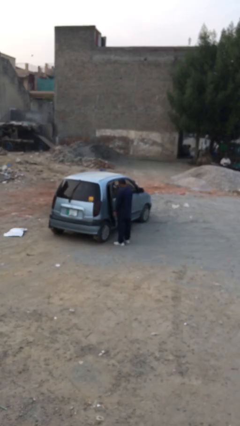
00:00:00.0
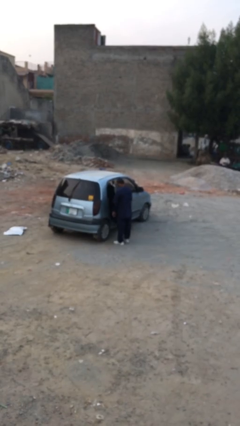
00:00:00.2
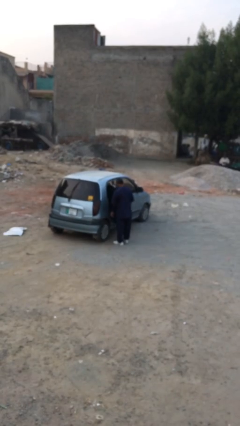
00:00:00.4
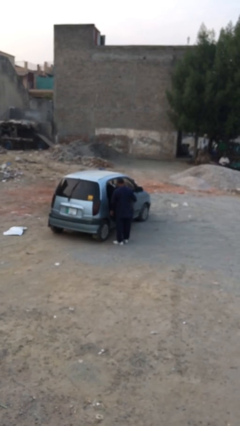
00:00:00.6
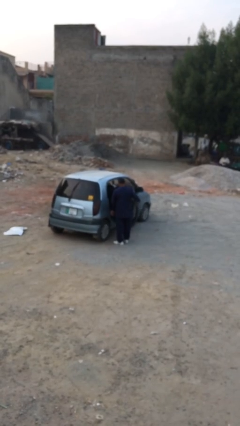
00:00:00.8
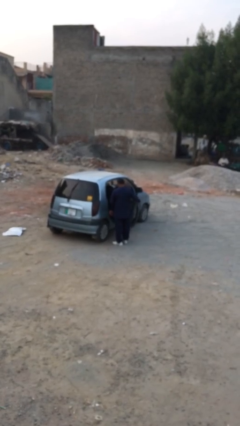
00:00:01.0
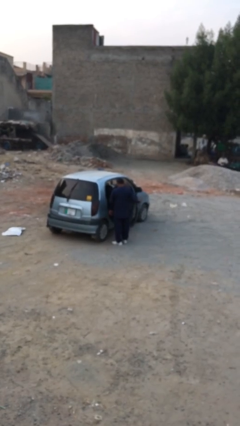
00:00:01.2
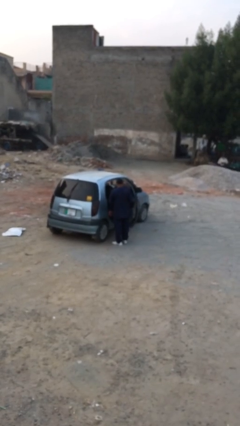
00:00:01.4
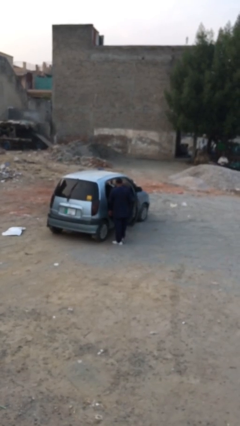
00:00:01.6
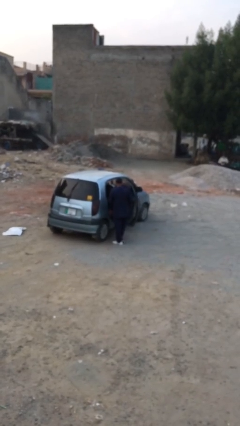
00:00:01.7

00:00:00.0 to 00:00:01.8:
person opens car door

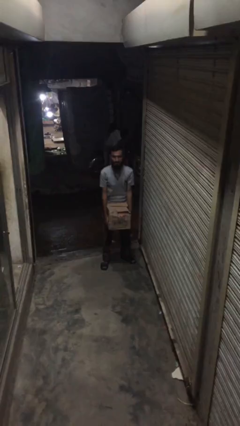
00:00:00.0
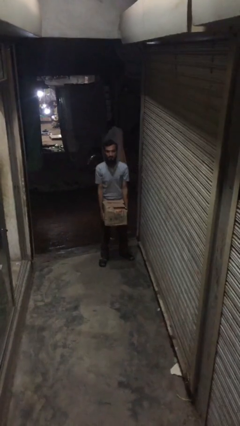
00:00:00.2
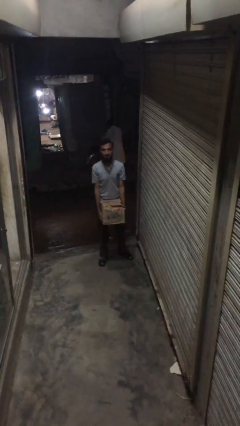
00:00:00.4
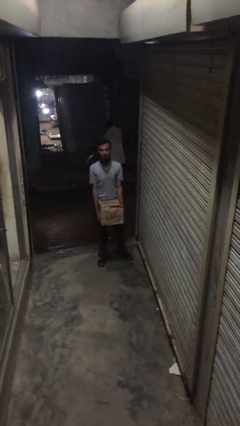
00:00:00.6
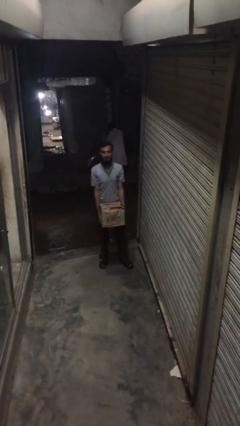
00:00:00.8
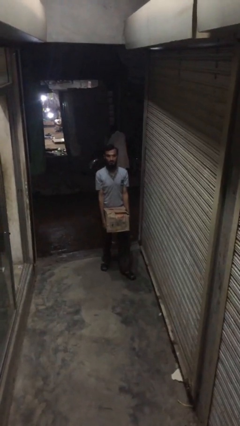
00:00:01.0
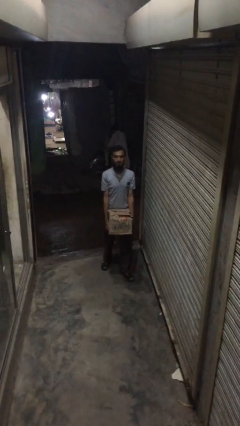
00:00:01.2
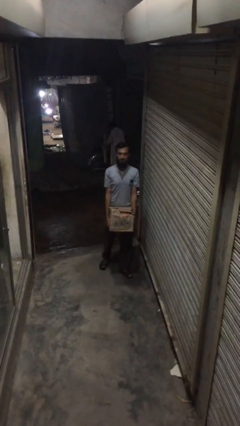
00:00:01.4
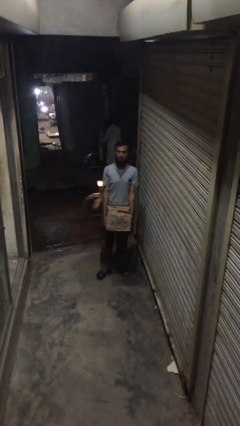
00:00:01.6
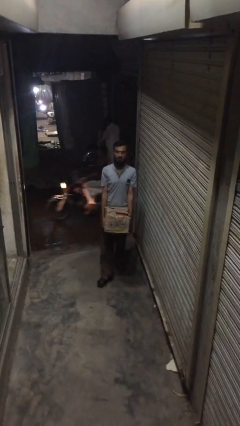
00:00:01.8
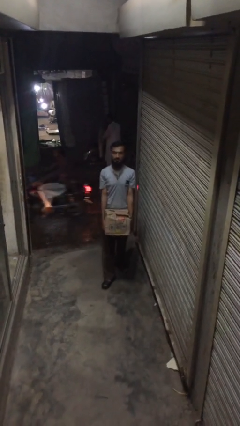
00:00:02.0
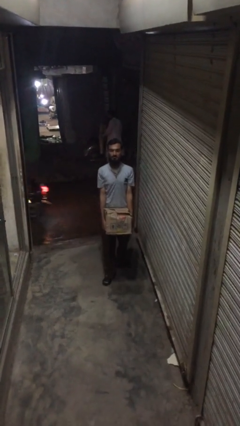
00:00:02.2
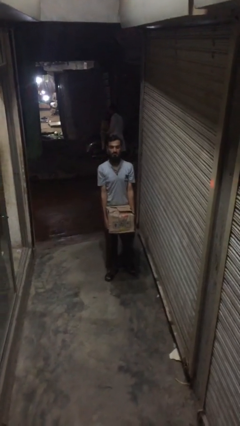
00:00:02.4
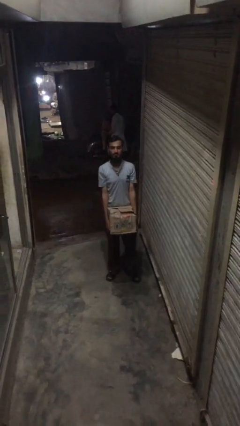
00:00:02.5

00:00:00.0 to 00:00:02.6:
person carries heavy object

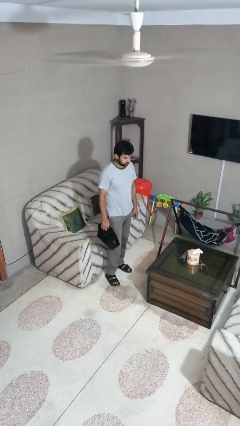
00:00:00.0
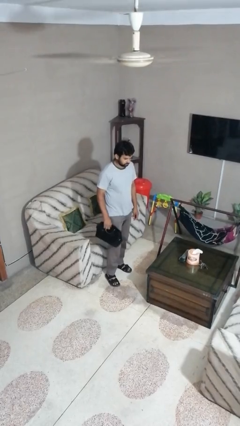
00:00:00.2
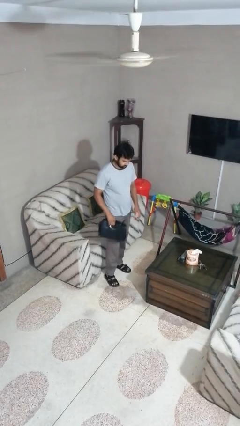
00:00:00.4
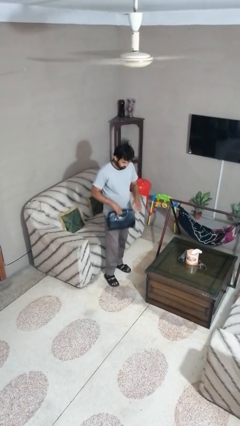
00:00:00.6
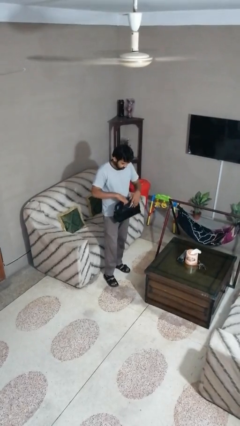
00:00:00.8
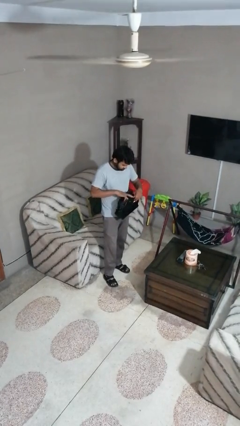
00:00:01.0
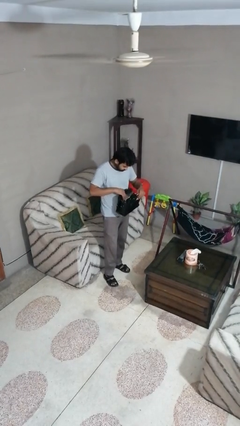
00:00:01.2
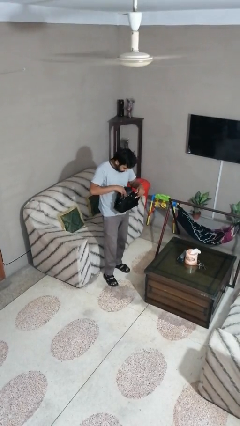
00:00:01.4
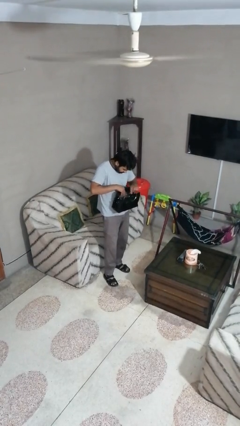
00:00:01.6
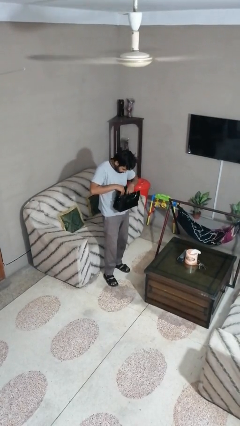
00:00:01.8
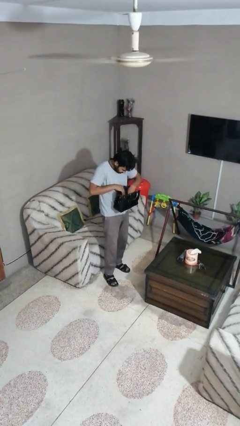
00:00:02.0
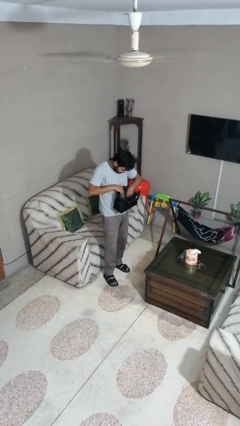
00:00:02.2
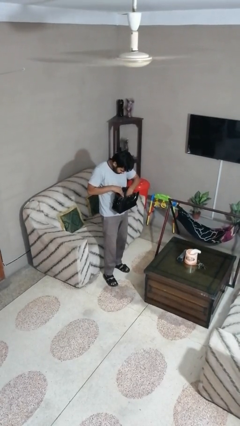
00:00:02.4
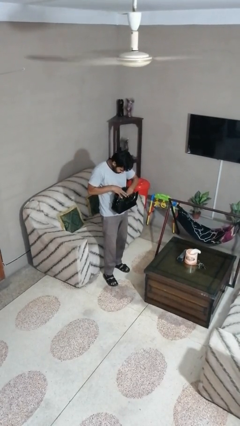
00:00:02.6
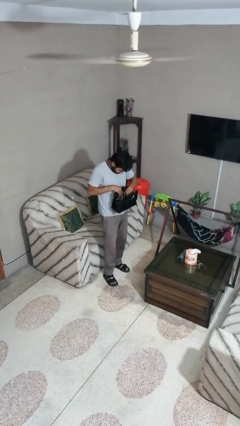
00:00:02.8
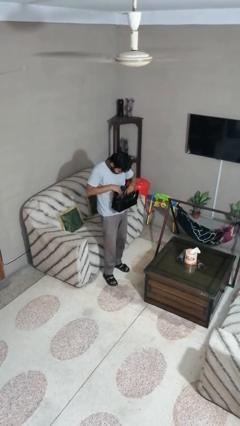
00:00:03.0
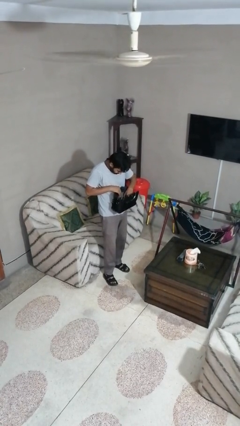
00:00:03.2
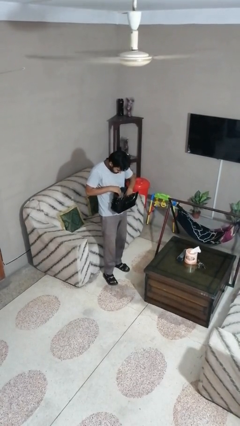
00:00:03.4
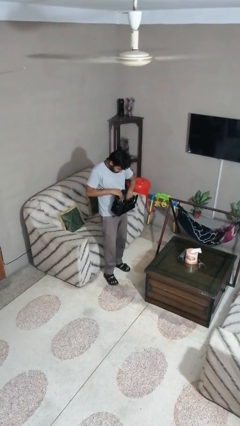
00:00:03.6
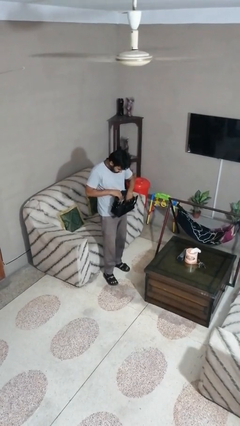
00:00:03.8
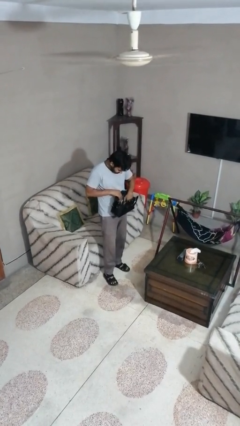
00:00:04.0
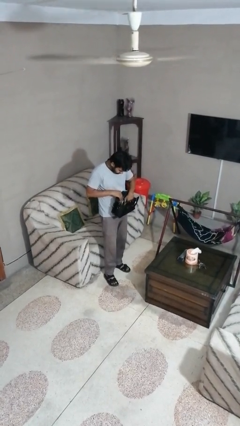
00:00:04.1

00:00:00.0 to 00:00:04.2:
person searches in purse

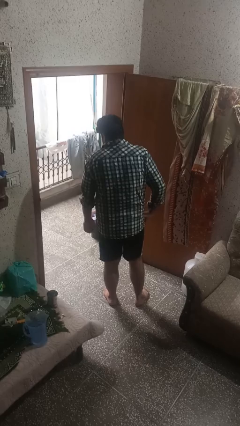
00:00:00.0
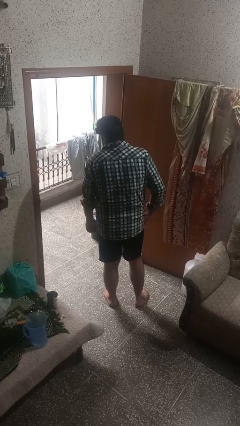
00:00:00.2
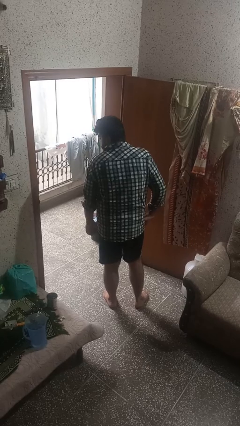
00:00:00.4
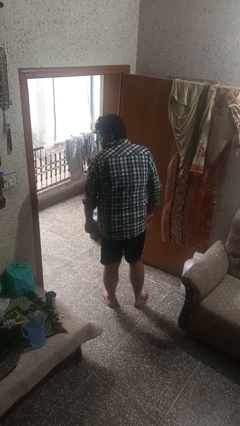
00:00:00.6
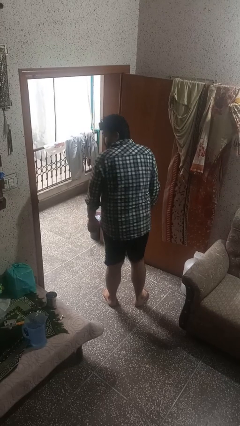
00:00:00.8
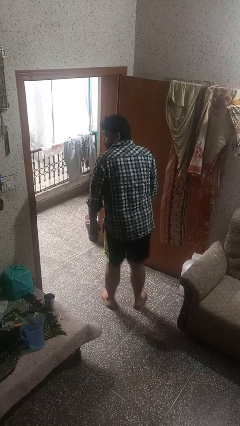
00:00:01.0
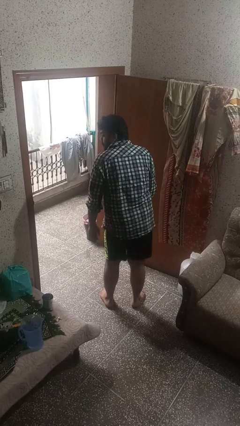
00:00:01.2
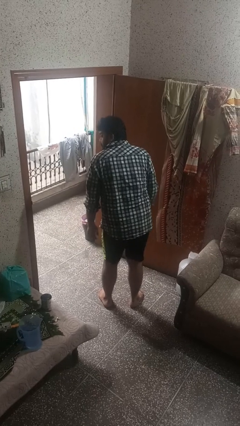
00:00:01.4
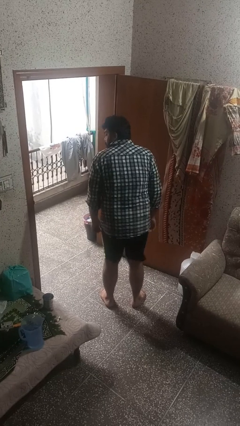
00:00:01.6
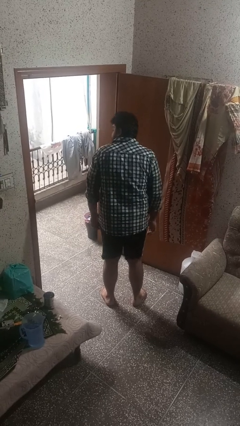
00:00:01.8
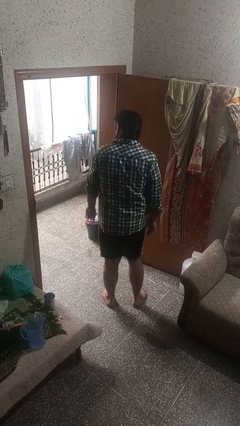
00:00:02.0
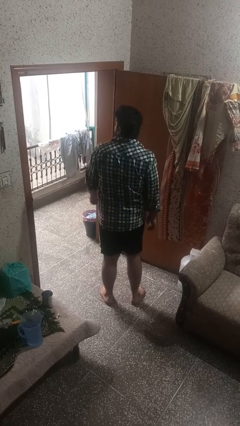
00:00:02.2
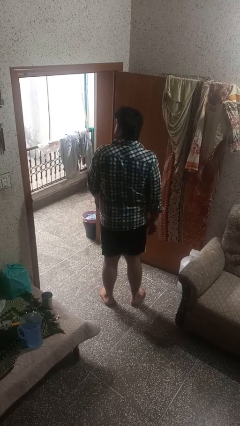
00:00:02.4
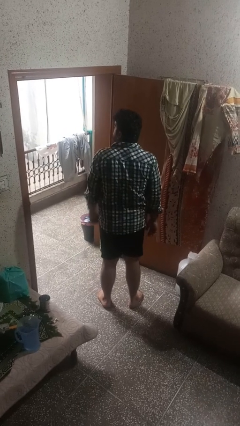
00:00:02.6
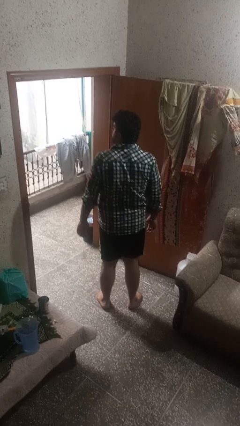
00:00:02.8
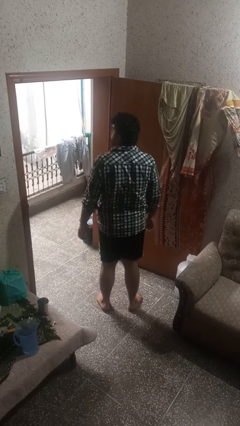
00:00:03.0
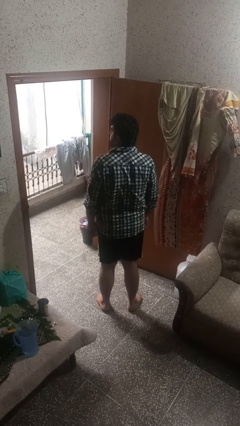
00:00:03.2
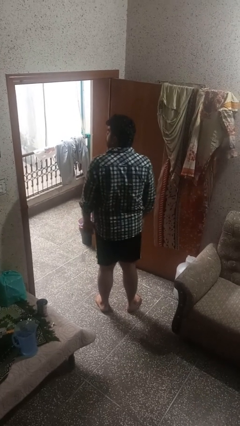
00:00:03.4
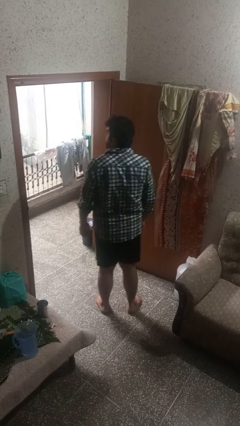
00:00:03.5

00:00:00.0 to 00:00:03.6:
person wiggles hips

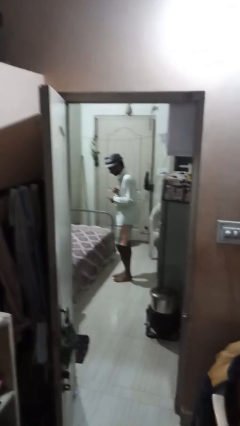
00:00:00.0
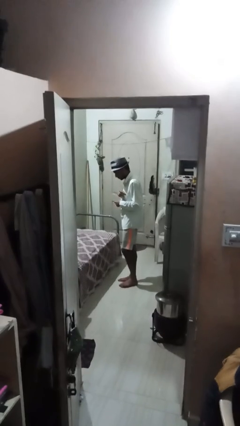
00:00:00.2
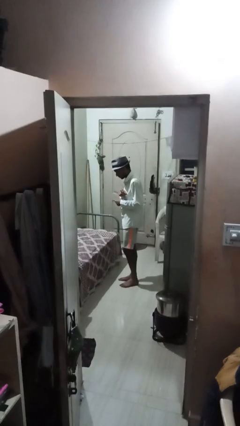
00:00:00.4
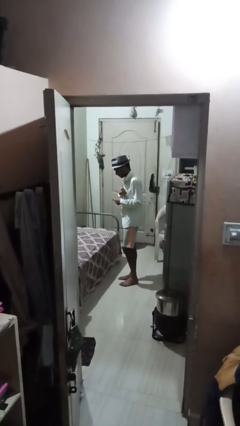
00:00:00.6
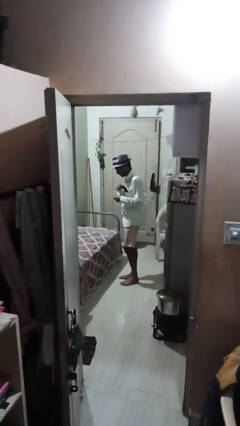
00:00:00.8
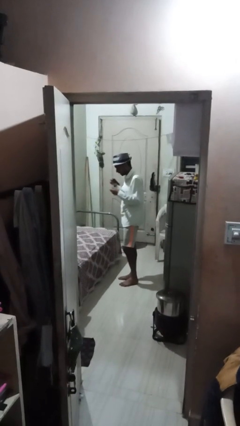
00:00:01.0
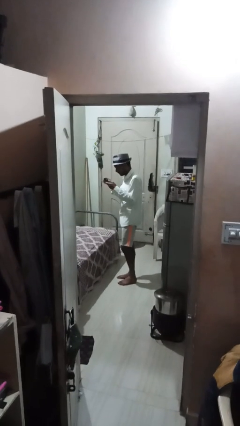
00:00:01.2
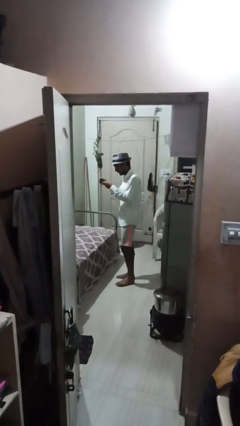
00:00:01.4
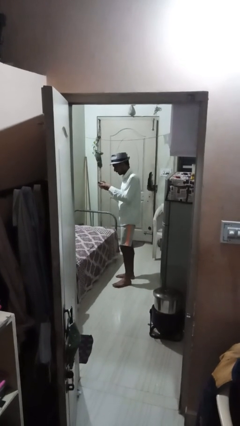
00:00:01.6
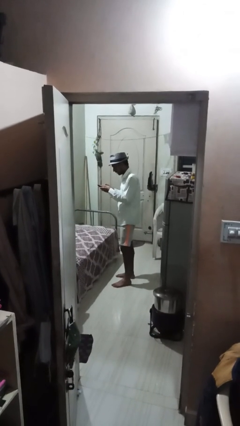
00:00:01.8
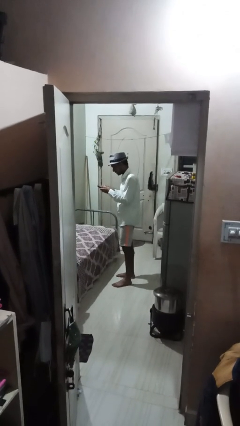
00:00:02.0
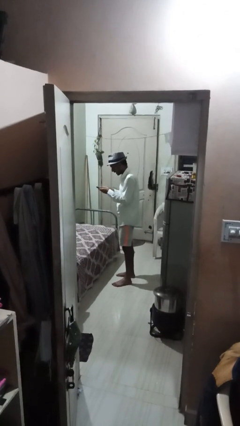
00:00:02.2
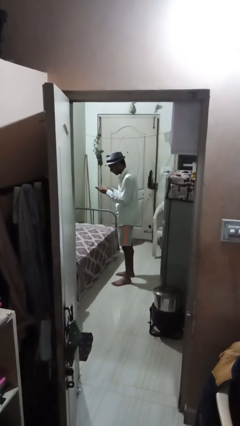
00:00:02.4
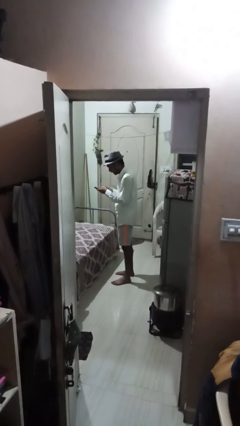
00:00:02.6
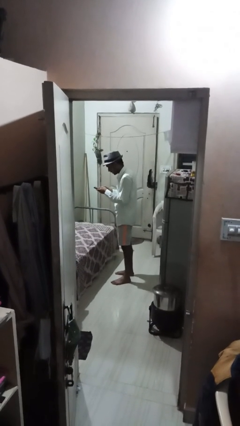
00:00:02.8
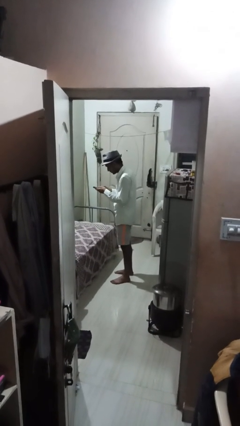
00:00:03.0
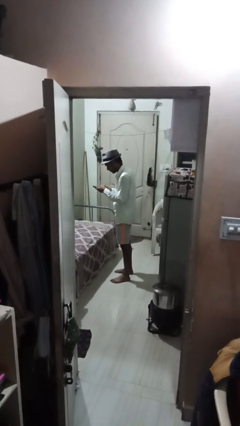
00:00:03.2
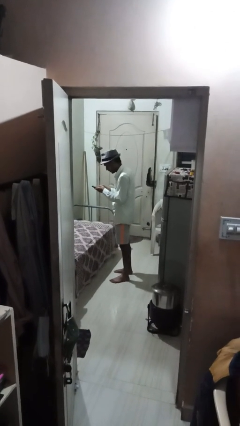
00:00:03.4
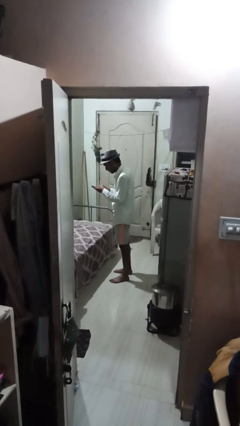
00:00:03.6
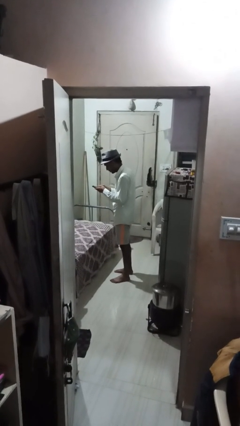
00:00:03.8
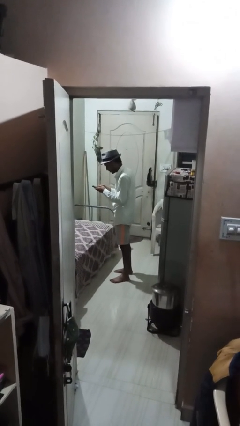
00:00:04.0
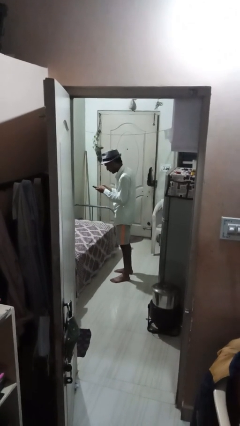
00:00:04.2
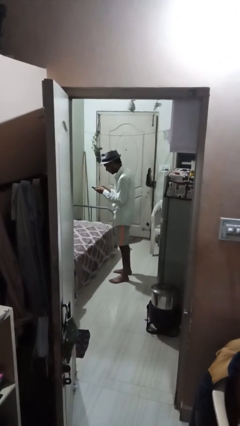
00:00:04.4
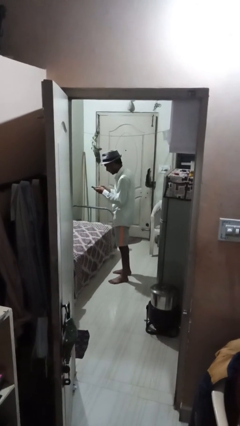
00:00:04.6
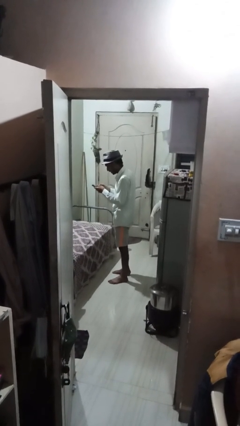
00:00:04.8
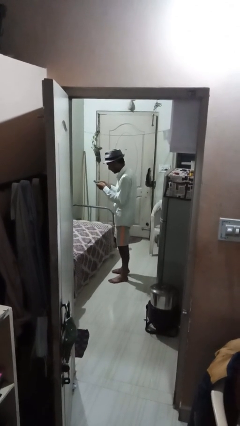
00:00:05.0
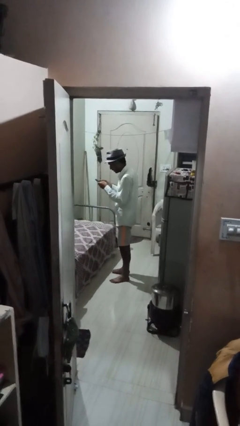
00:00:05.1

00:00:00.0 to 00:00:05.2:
person takes phone from pocket
